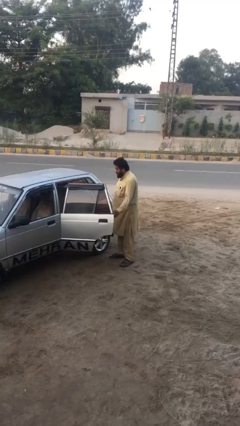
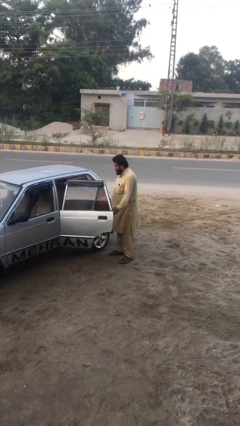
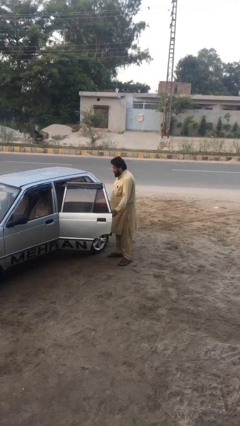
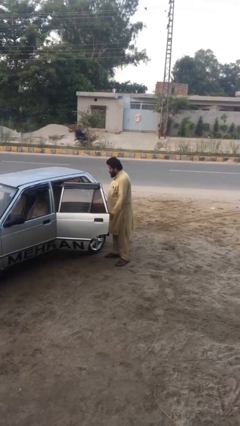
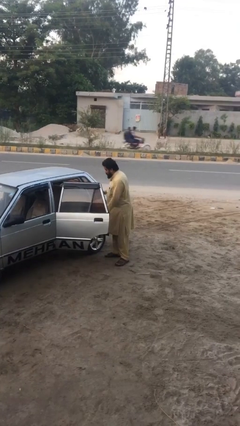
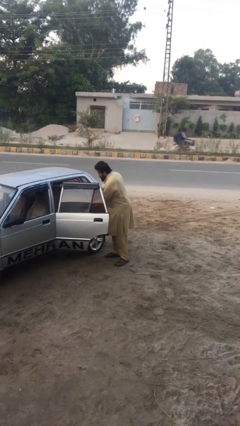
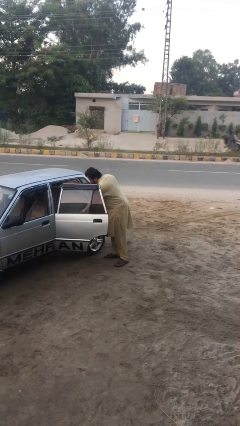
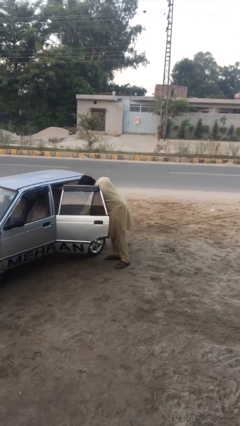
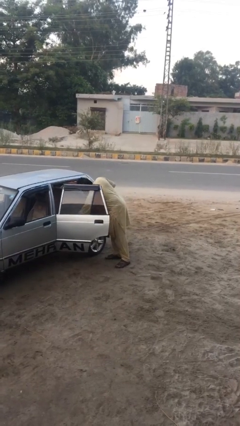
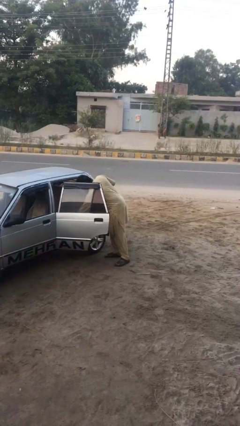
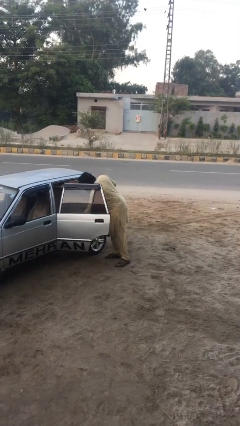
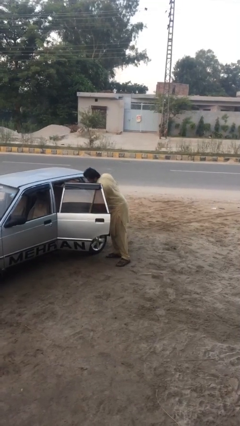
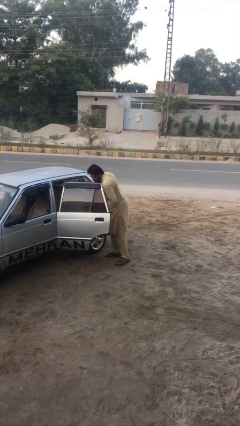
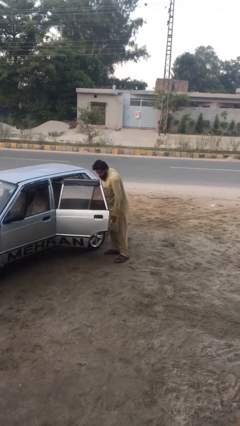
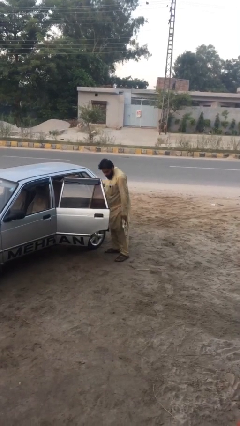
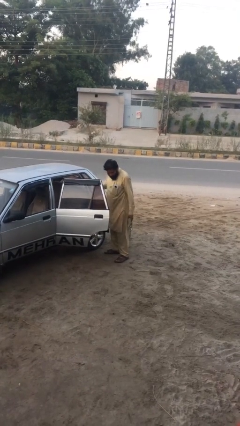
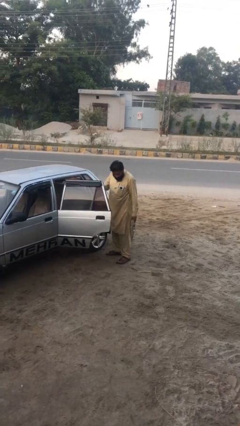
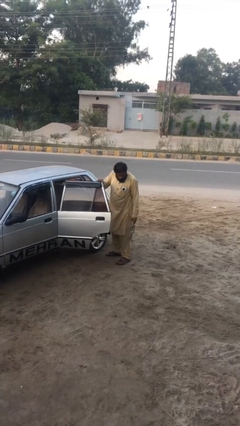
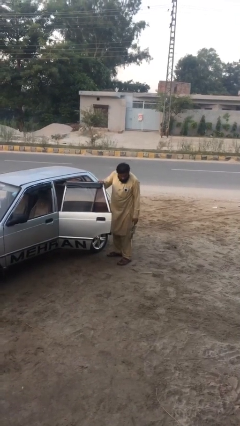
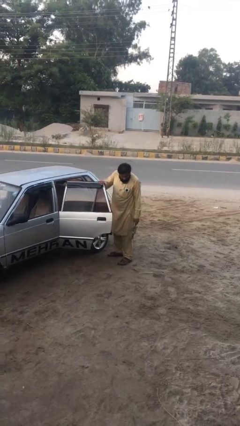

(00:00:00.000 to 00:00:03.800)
person unloads car

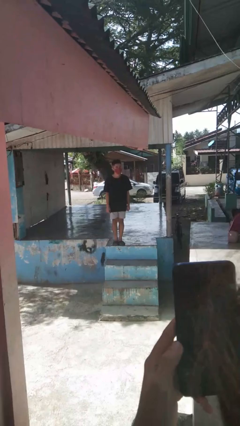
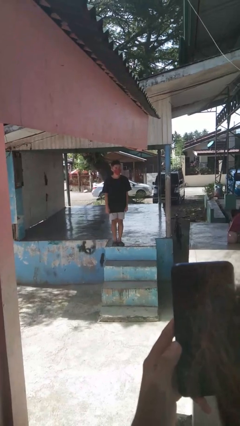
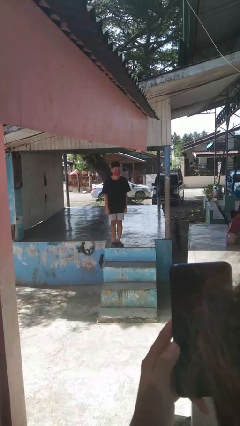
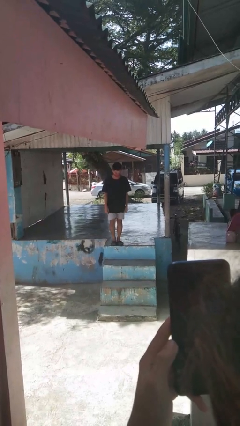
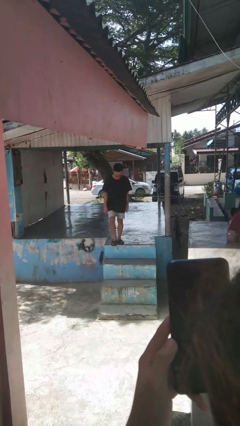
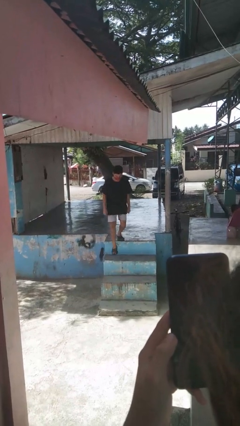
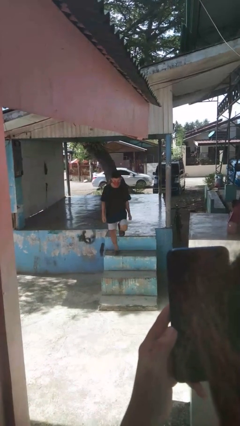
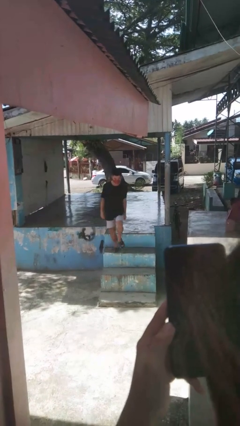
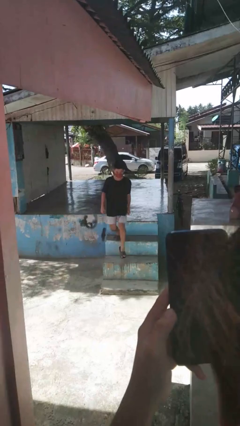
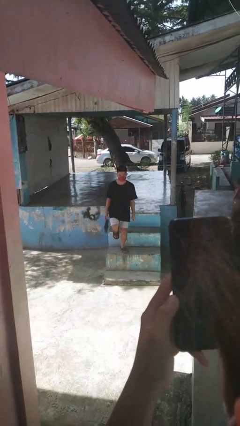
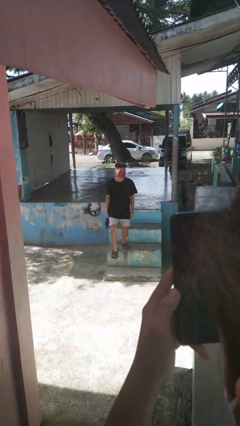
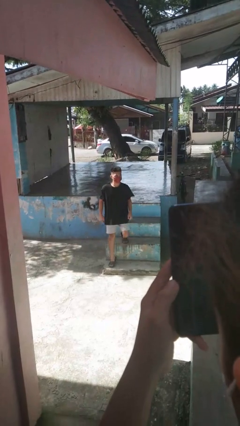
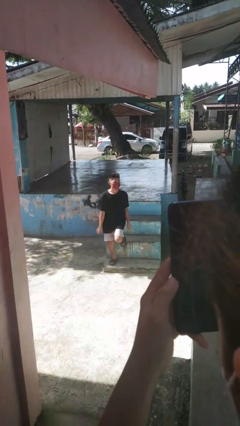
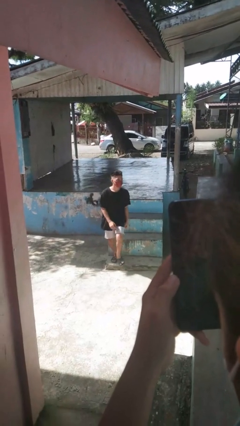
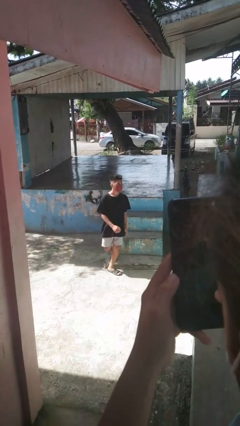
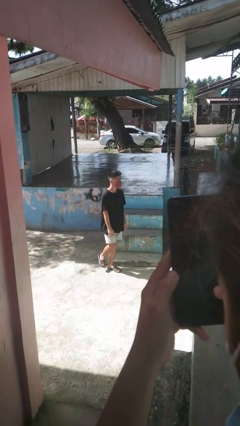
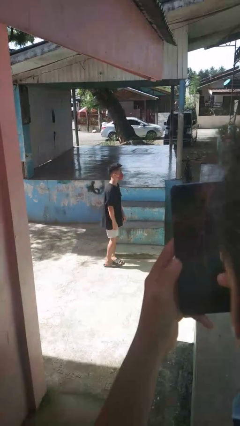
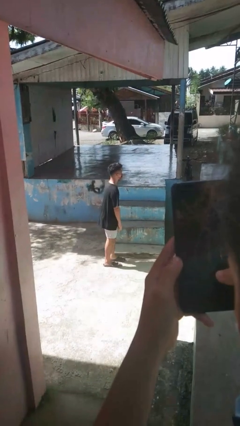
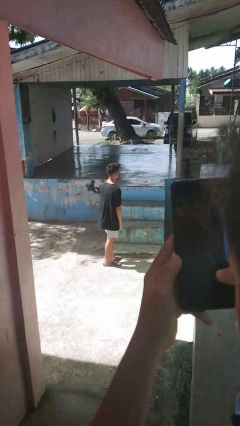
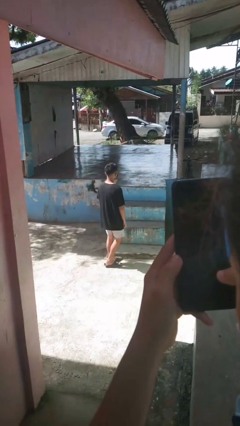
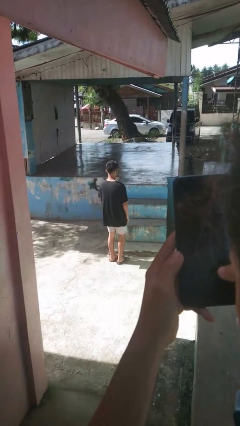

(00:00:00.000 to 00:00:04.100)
person climbs down stairs

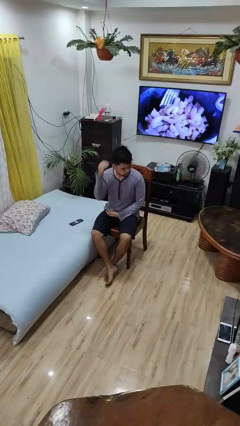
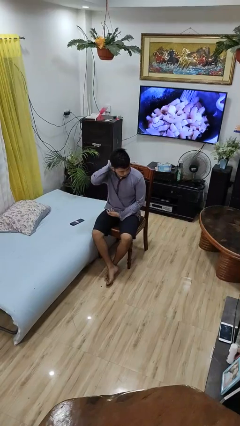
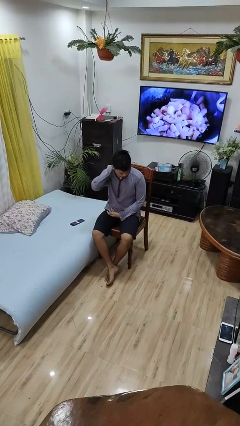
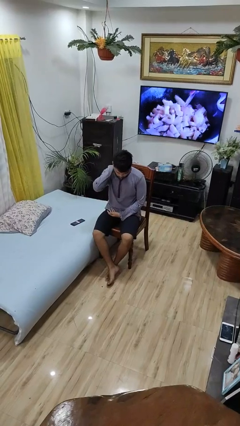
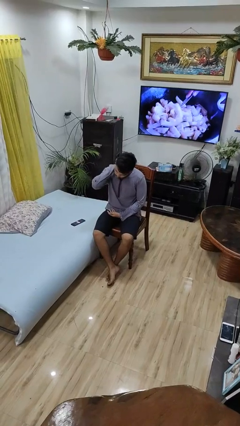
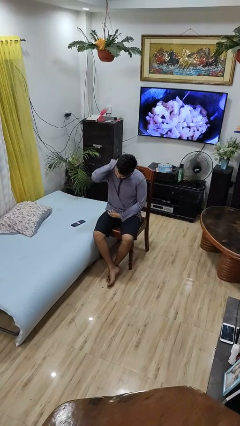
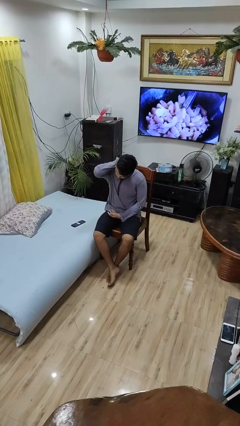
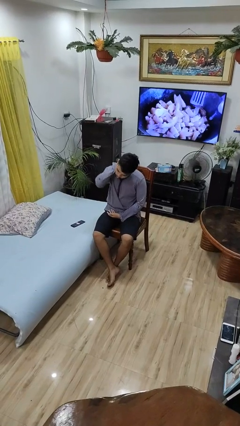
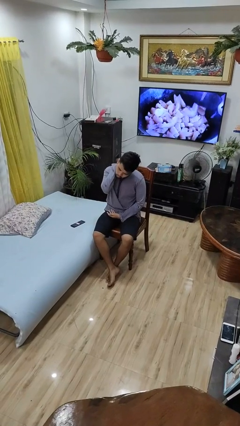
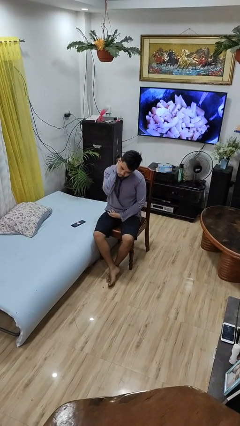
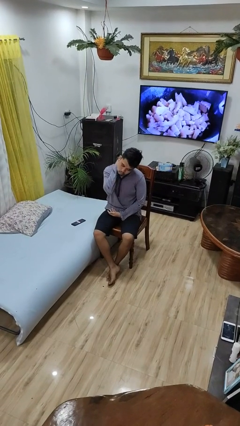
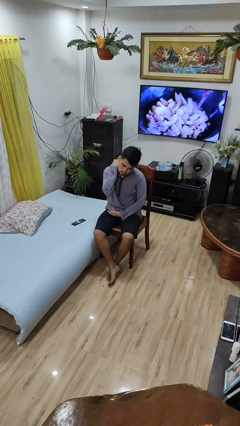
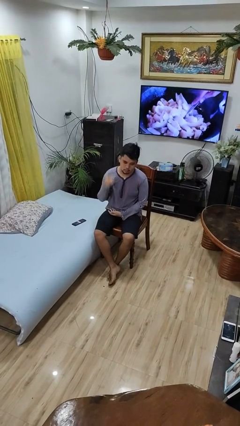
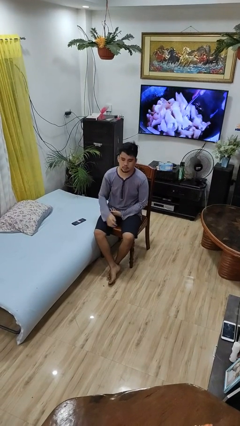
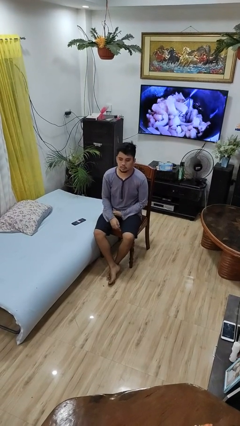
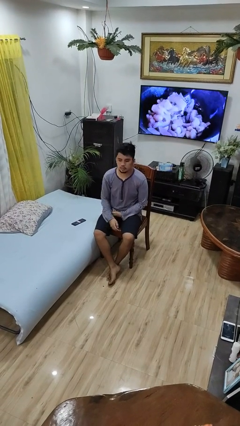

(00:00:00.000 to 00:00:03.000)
person rubs neck

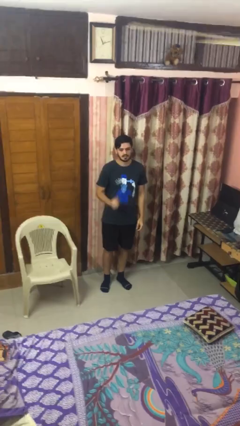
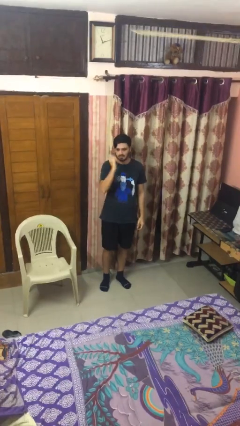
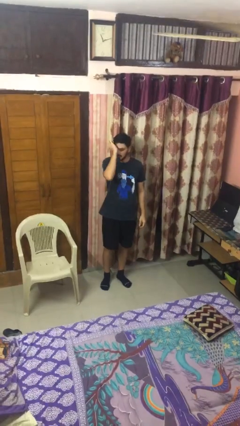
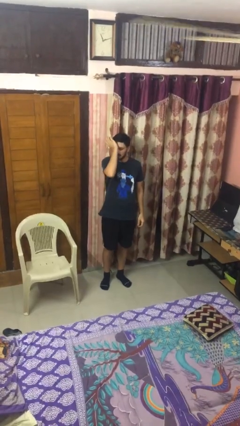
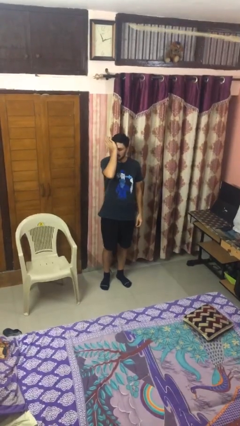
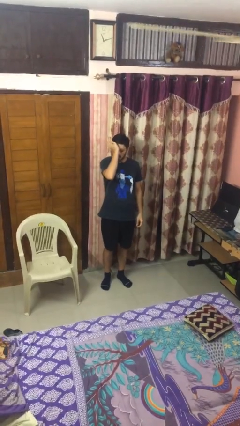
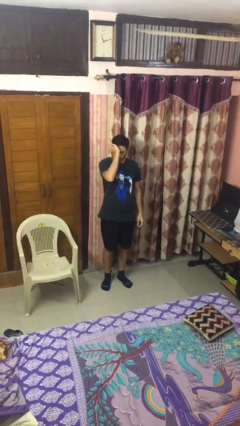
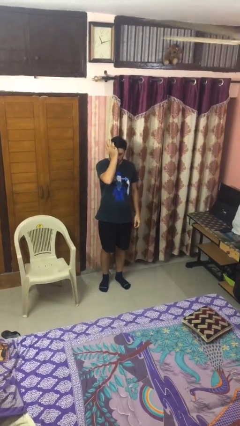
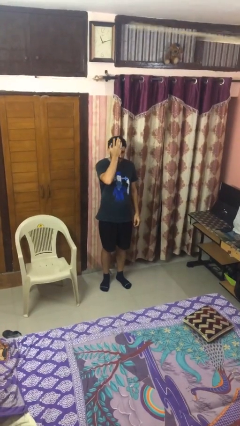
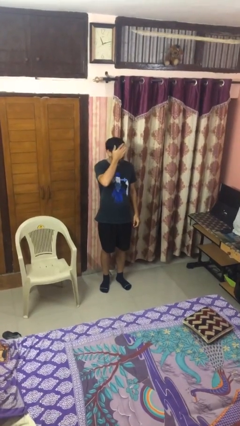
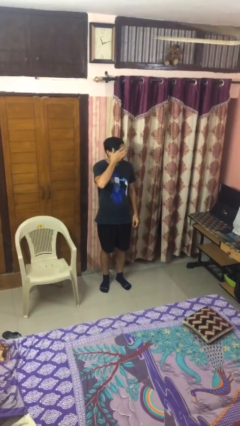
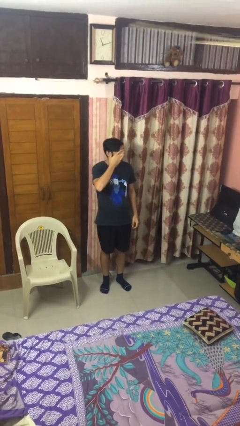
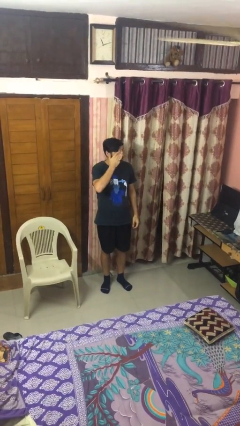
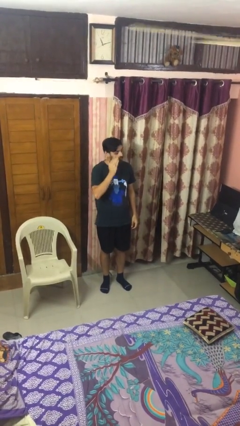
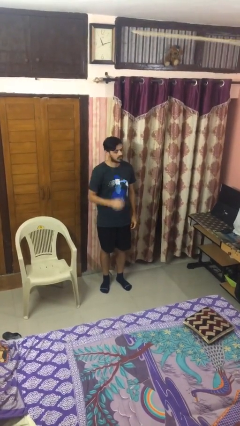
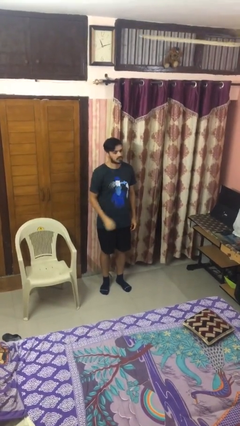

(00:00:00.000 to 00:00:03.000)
person rubs eyes

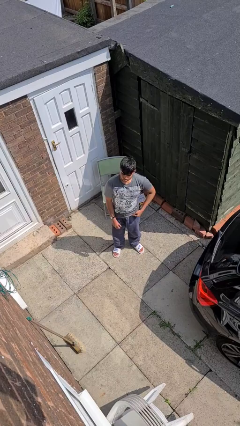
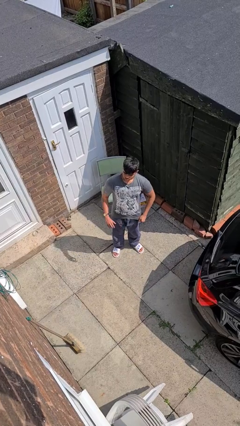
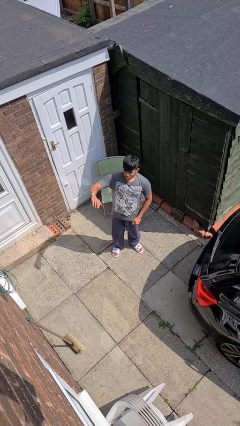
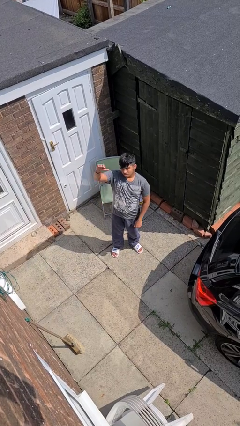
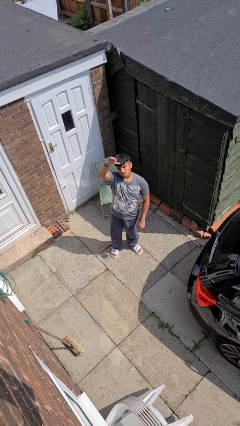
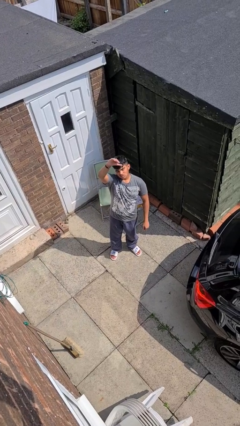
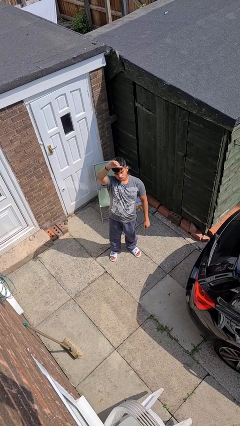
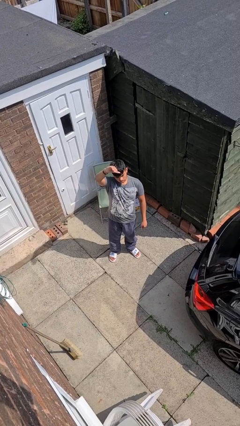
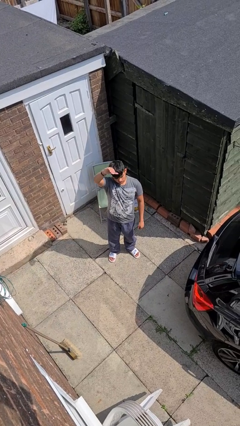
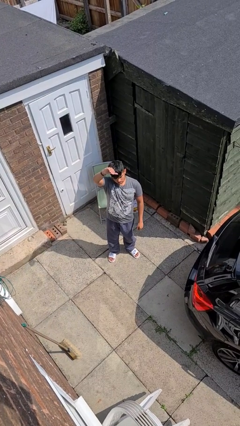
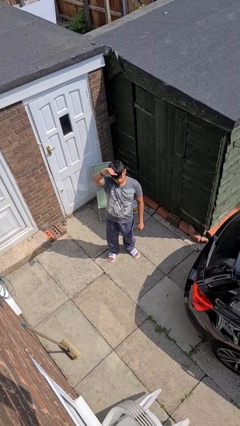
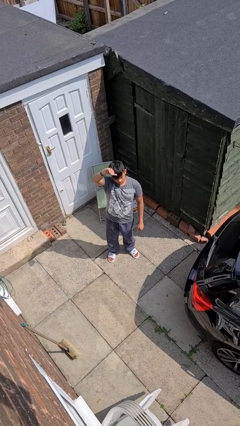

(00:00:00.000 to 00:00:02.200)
person gestures raise hand

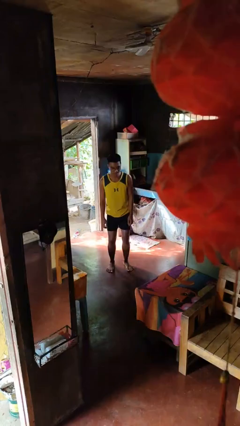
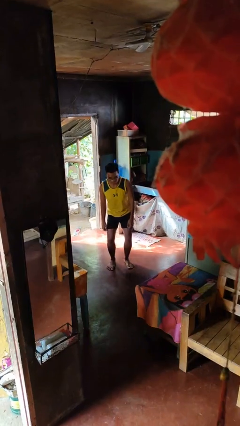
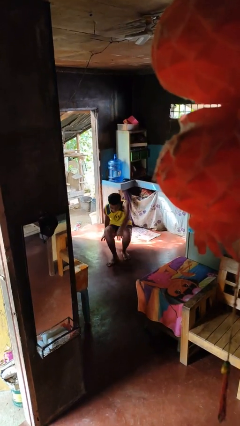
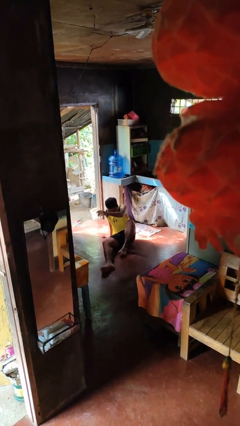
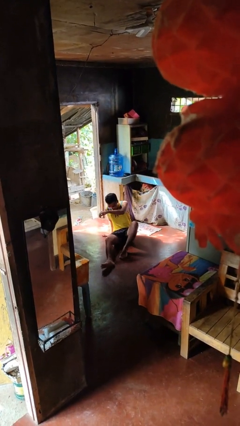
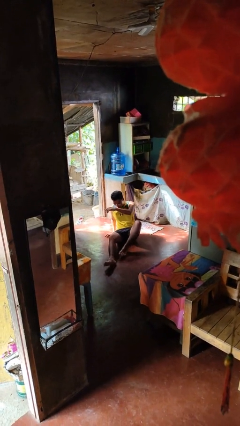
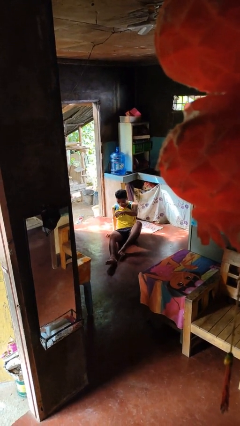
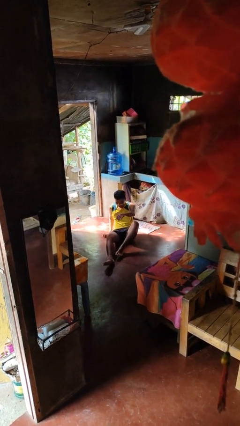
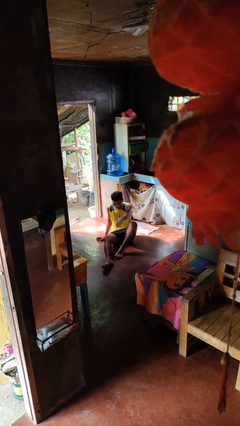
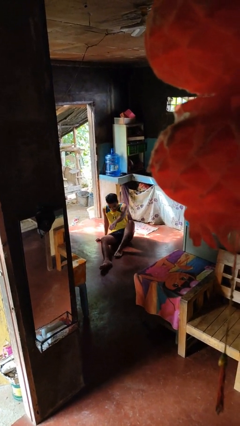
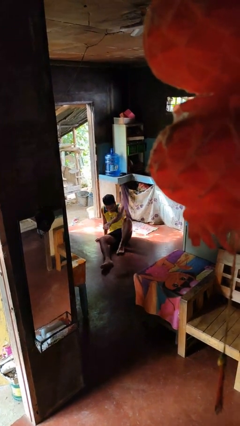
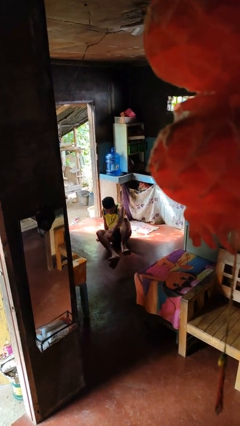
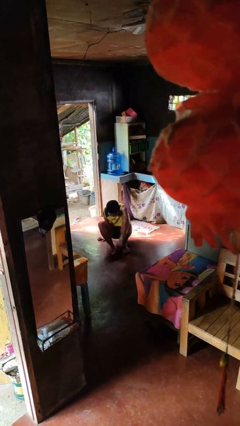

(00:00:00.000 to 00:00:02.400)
person falls while standing
